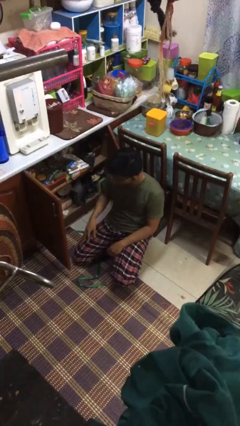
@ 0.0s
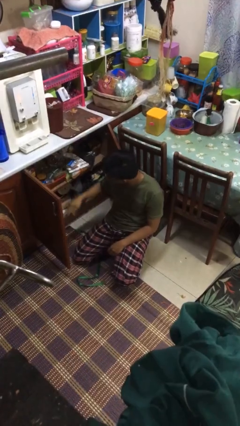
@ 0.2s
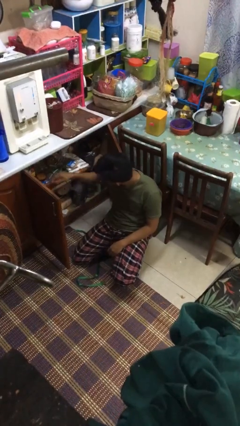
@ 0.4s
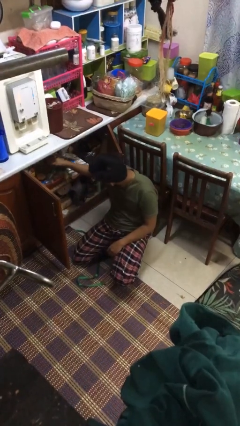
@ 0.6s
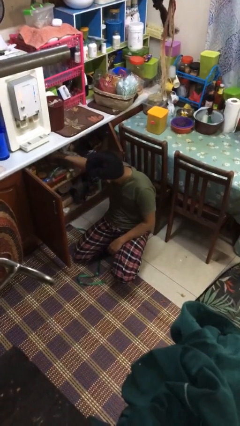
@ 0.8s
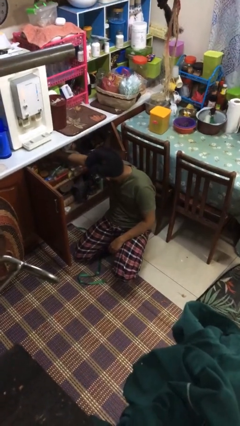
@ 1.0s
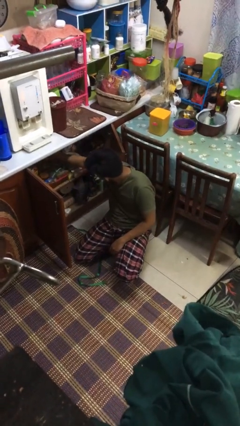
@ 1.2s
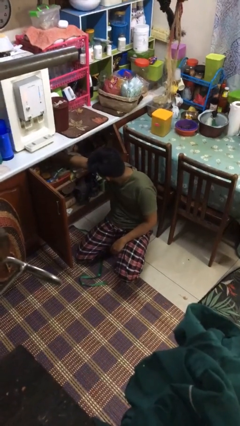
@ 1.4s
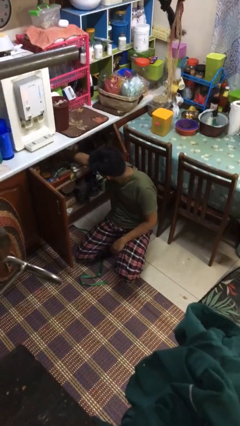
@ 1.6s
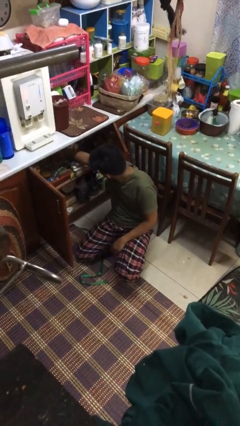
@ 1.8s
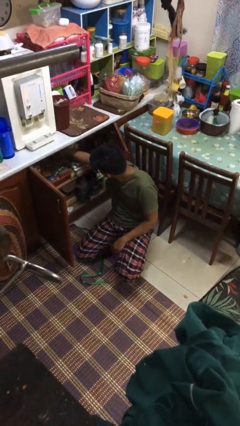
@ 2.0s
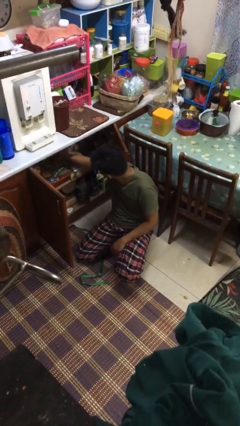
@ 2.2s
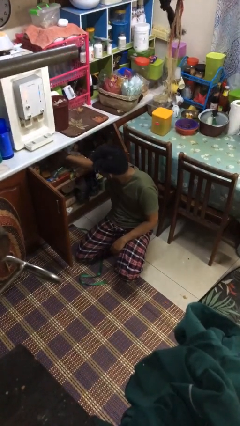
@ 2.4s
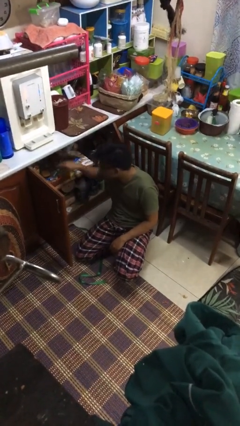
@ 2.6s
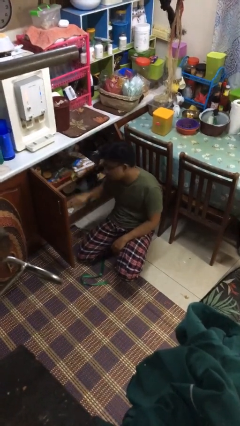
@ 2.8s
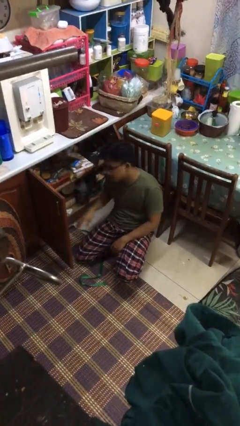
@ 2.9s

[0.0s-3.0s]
person searches in kitchen drawer

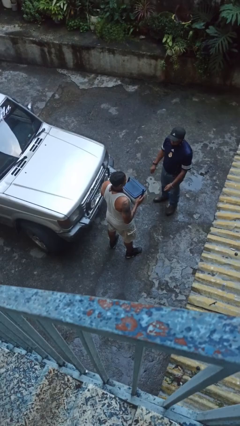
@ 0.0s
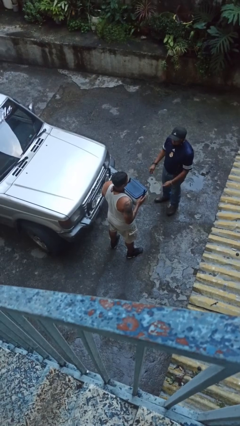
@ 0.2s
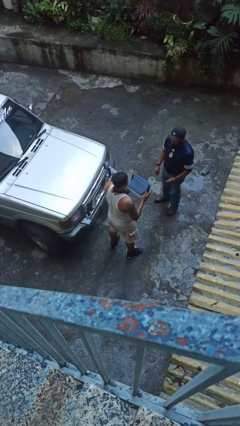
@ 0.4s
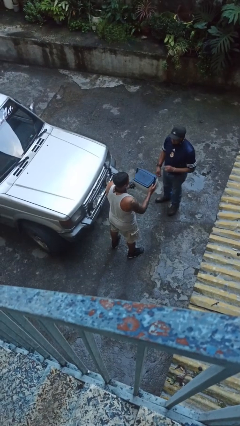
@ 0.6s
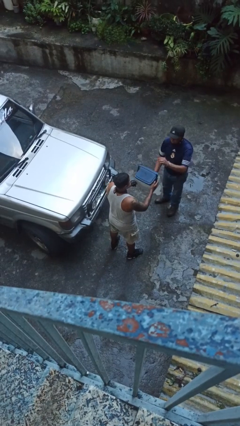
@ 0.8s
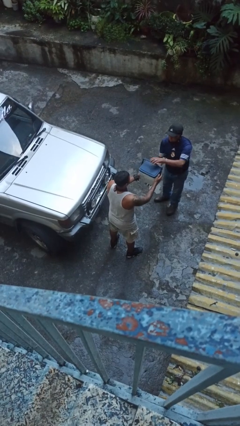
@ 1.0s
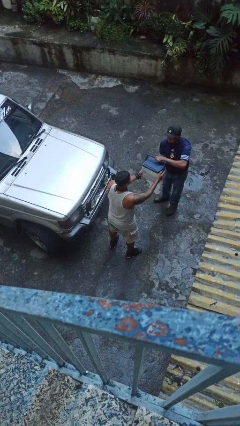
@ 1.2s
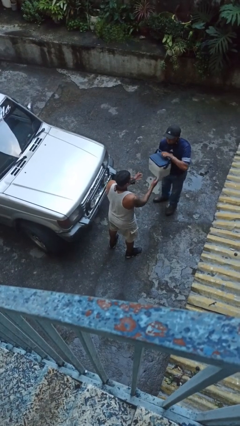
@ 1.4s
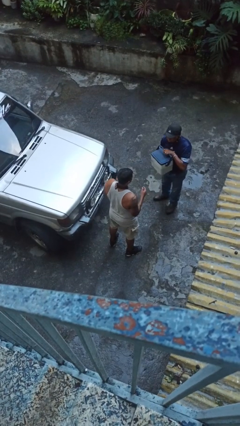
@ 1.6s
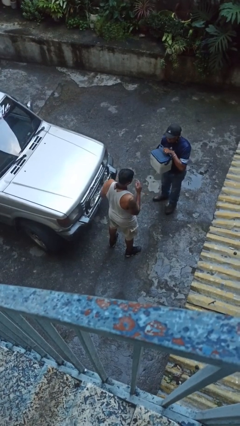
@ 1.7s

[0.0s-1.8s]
person transfers object to person

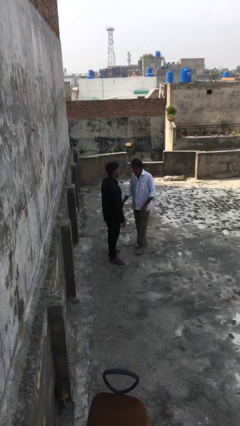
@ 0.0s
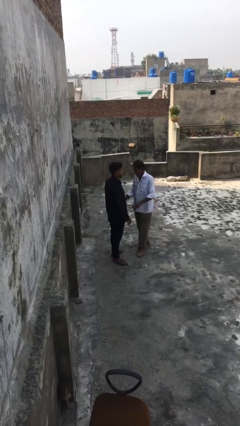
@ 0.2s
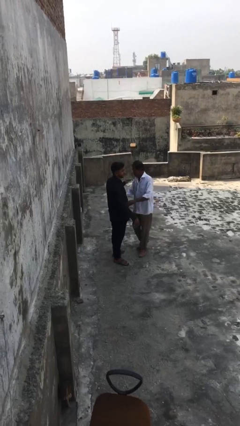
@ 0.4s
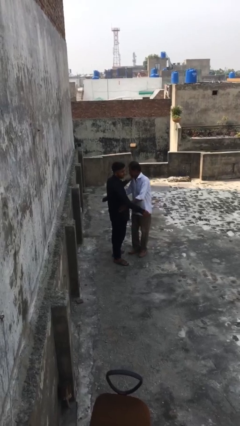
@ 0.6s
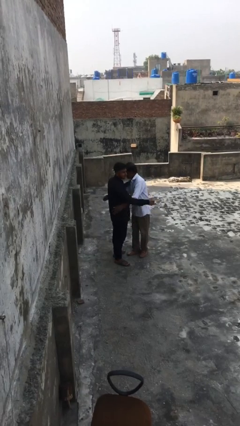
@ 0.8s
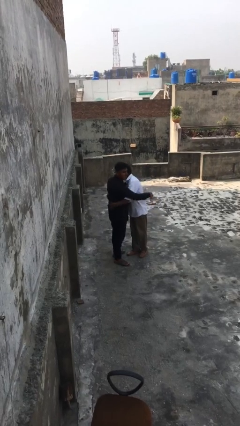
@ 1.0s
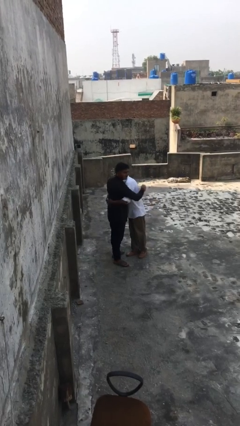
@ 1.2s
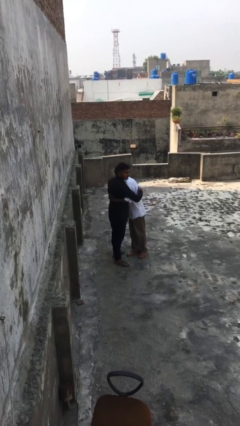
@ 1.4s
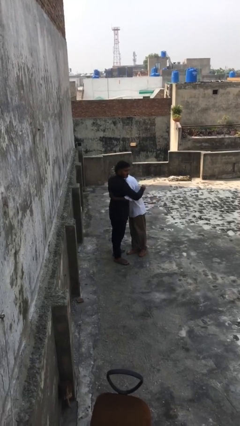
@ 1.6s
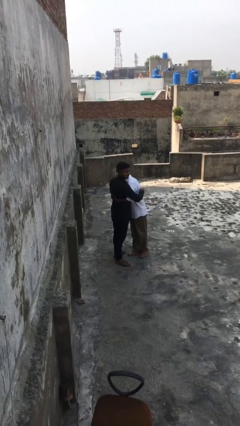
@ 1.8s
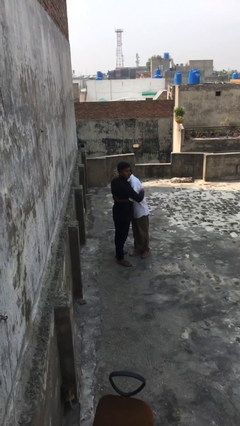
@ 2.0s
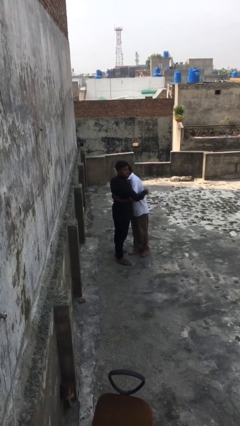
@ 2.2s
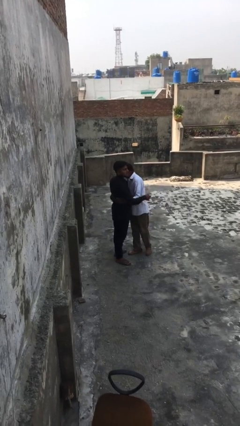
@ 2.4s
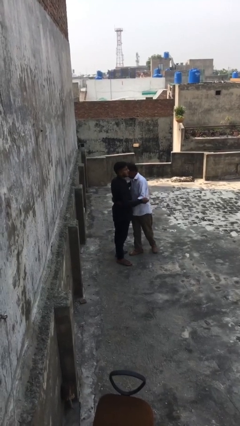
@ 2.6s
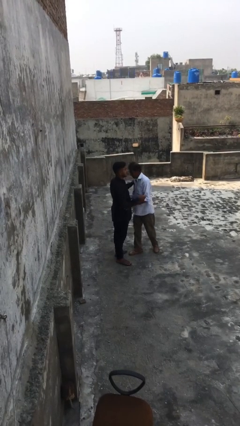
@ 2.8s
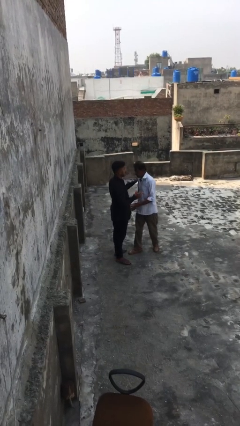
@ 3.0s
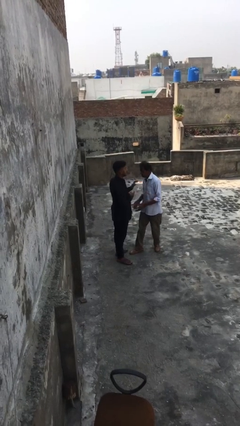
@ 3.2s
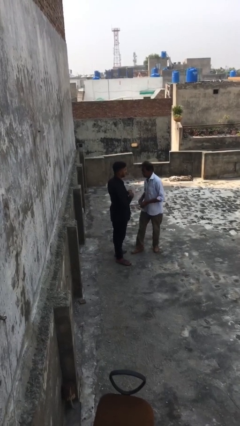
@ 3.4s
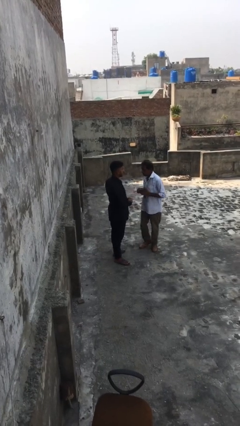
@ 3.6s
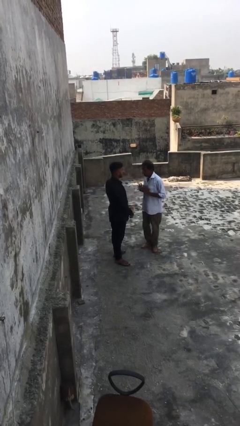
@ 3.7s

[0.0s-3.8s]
person embraces person

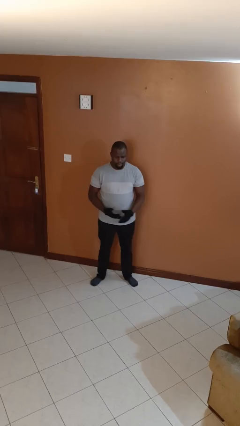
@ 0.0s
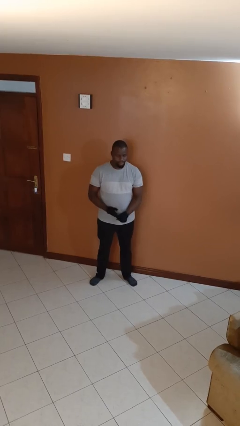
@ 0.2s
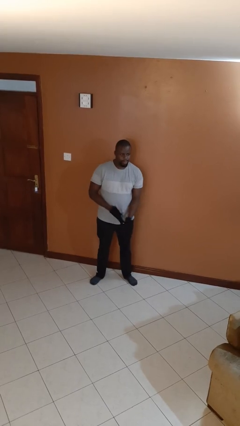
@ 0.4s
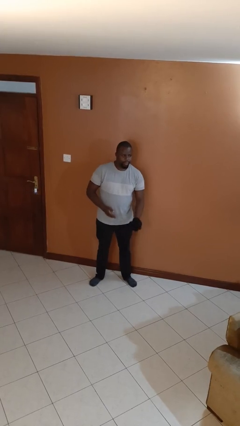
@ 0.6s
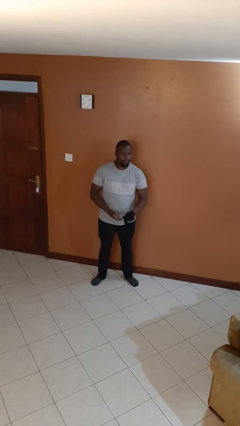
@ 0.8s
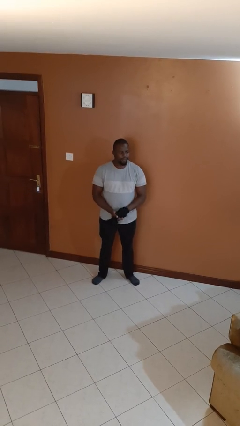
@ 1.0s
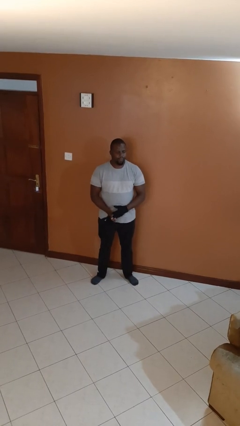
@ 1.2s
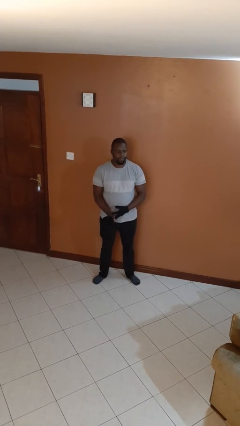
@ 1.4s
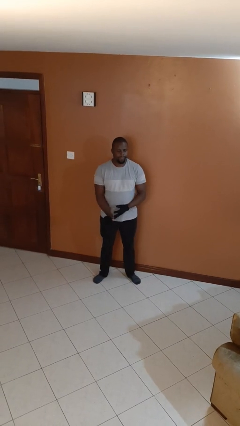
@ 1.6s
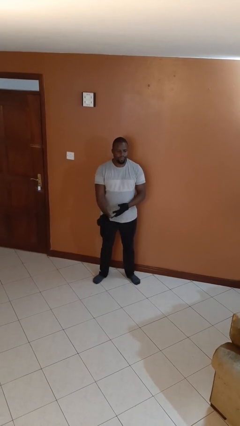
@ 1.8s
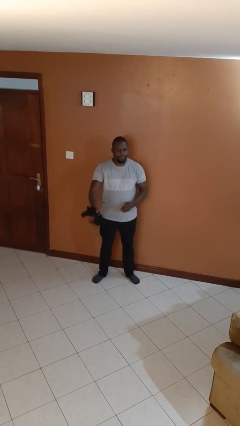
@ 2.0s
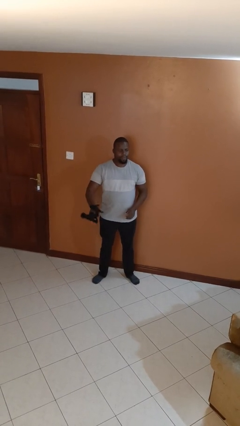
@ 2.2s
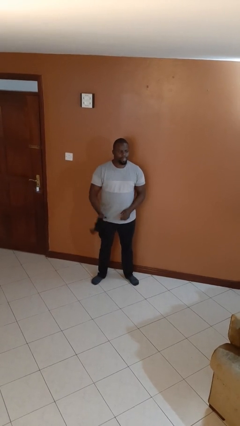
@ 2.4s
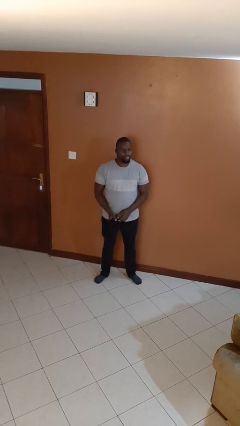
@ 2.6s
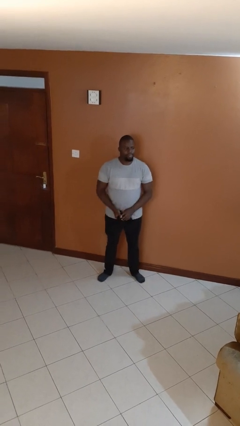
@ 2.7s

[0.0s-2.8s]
person takes off gloves

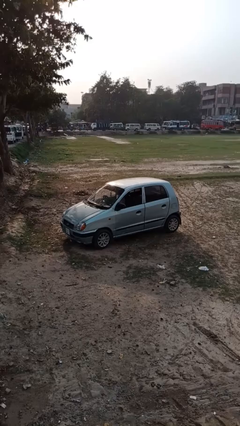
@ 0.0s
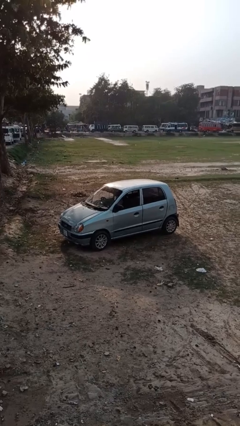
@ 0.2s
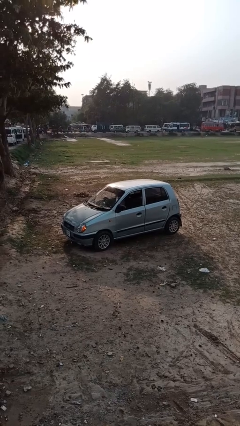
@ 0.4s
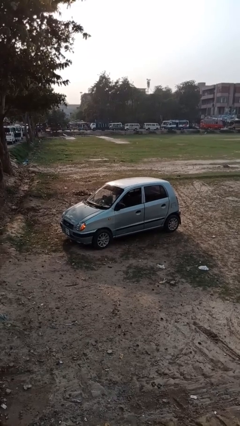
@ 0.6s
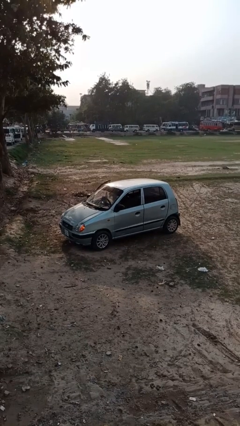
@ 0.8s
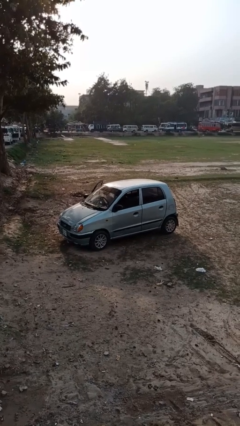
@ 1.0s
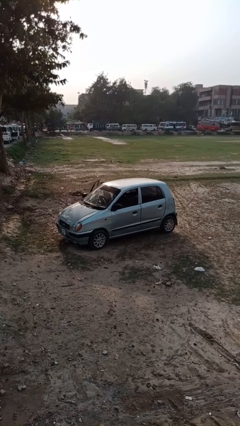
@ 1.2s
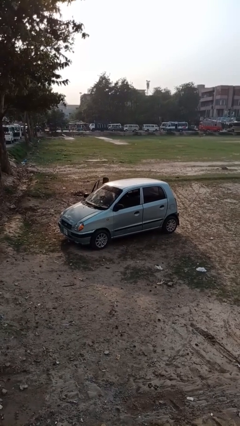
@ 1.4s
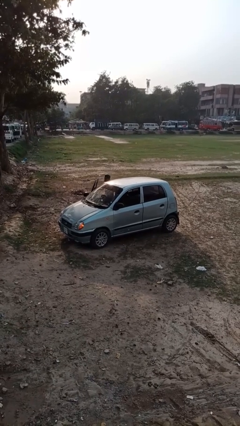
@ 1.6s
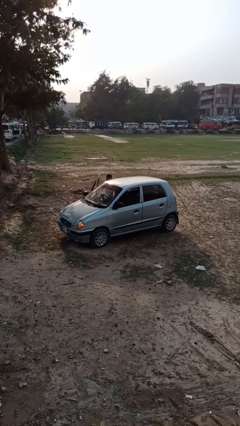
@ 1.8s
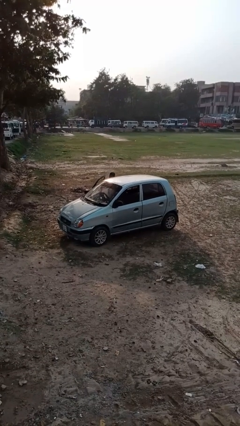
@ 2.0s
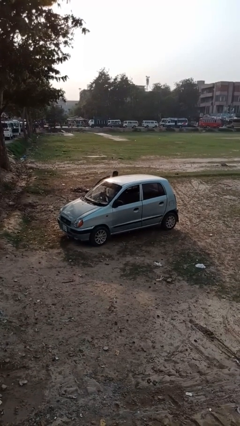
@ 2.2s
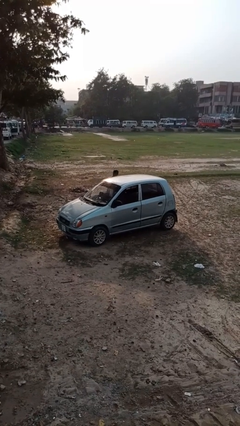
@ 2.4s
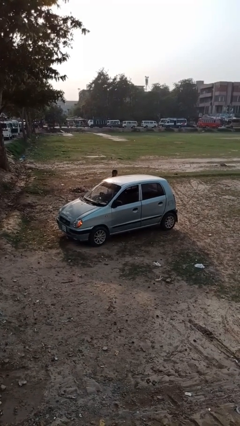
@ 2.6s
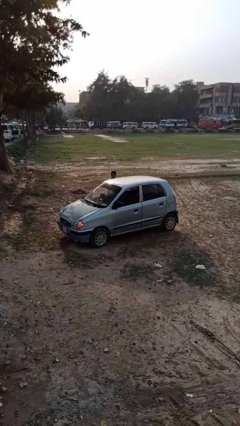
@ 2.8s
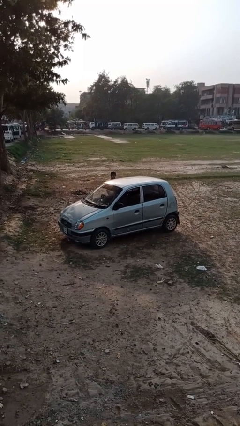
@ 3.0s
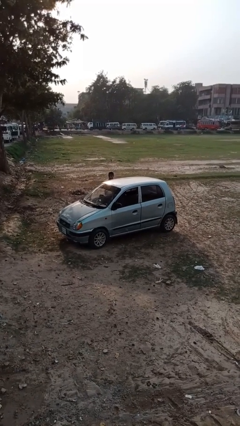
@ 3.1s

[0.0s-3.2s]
car drops off person

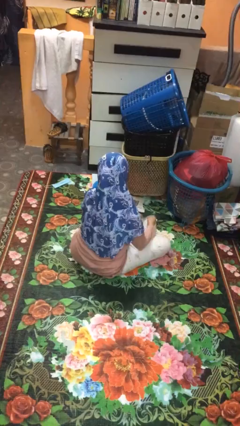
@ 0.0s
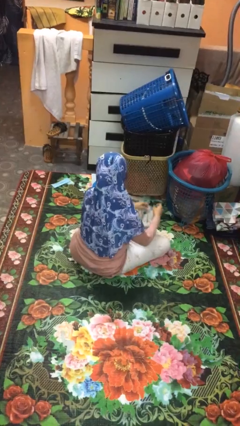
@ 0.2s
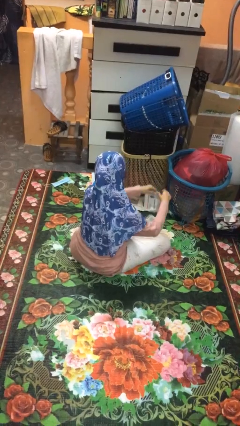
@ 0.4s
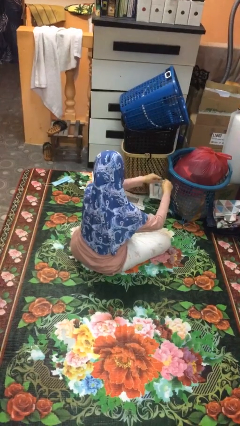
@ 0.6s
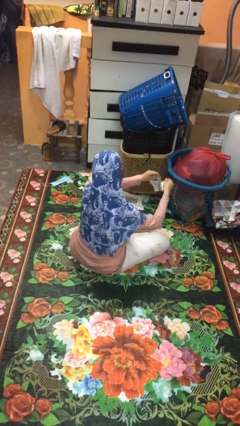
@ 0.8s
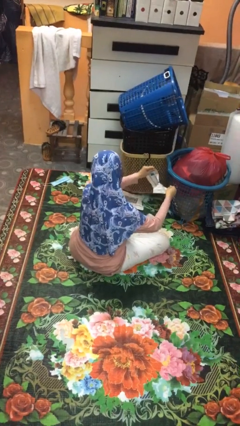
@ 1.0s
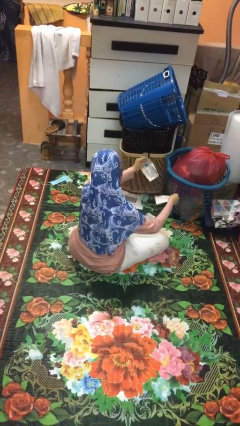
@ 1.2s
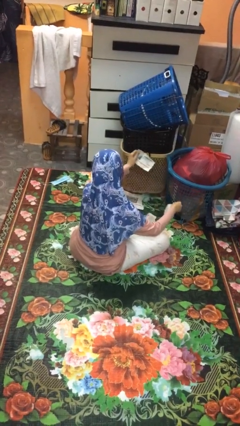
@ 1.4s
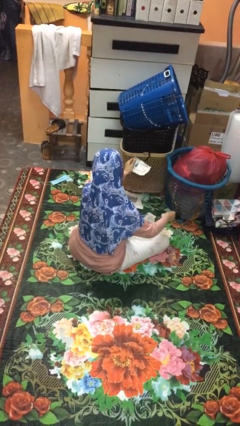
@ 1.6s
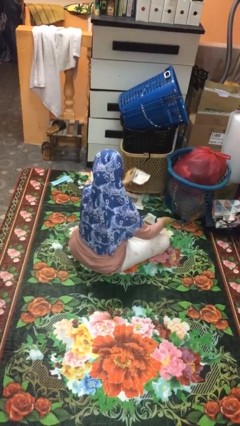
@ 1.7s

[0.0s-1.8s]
person tears paper

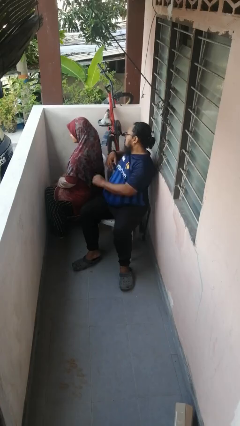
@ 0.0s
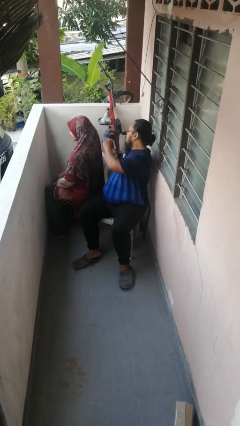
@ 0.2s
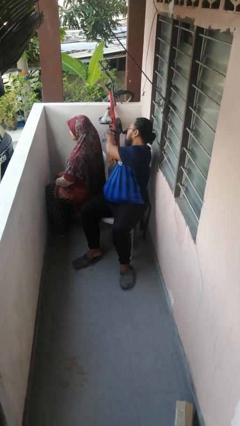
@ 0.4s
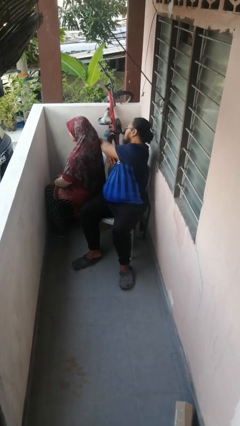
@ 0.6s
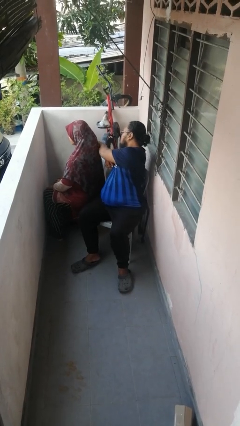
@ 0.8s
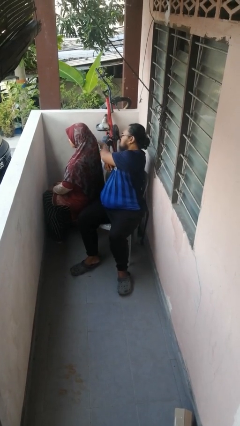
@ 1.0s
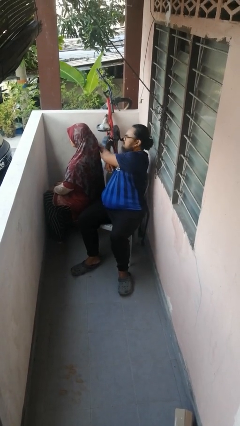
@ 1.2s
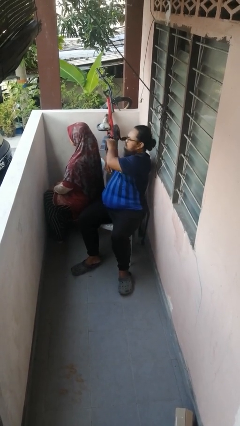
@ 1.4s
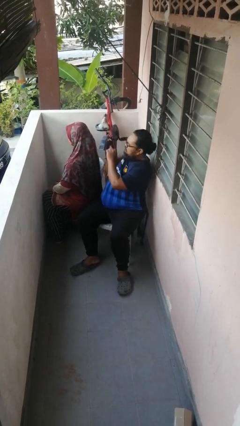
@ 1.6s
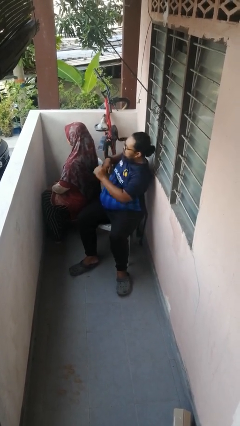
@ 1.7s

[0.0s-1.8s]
person touches back of person
